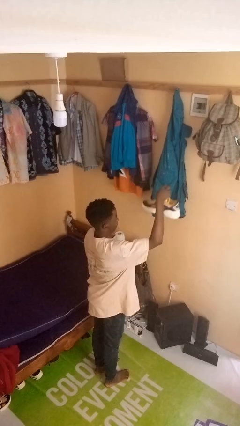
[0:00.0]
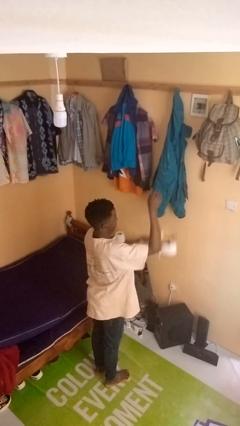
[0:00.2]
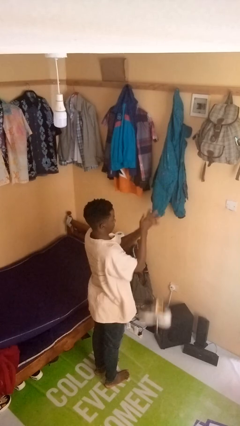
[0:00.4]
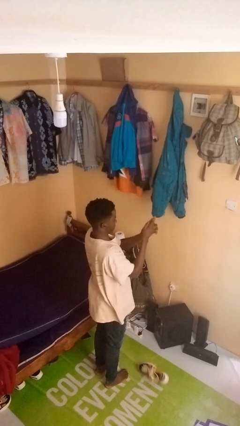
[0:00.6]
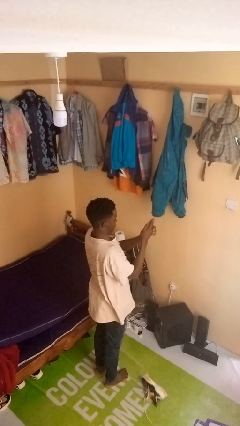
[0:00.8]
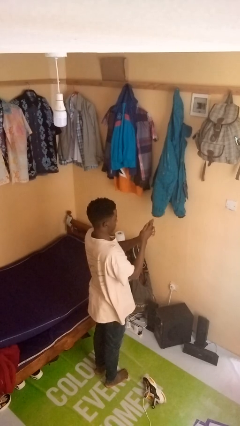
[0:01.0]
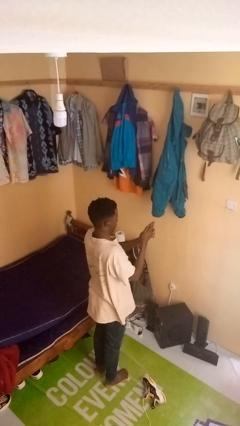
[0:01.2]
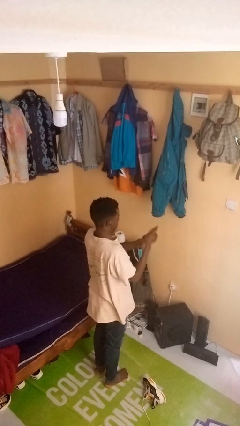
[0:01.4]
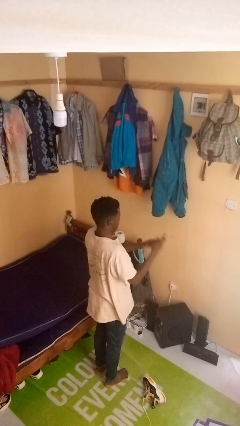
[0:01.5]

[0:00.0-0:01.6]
person drops object

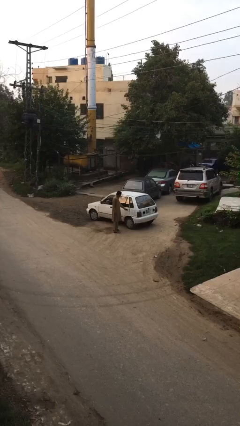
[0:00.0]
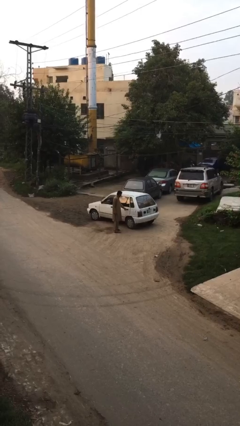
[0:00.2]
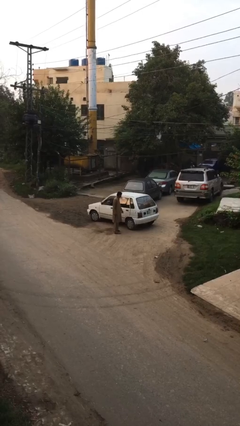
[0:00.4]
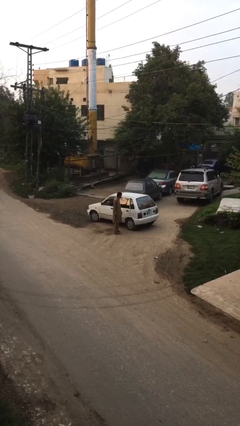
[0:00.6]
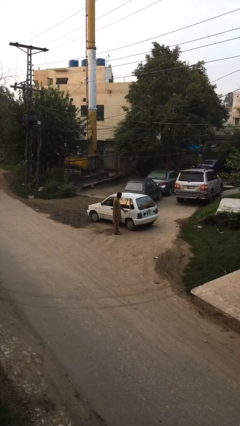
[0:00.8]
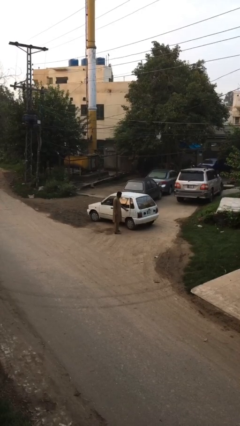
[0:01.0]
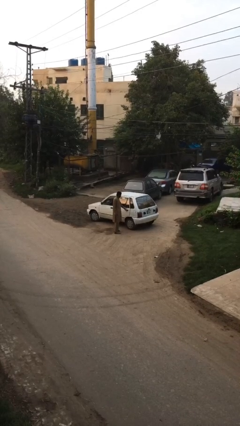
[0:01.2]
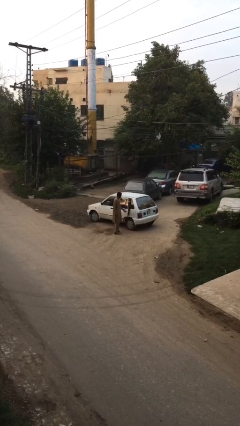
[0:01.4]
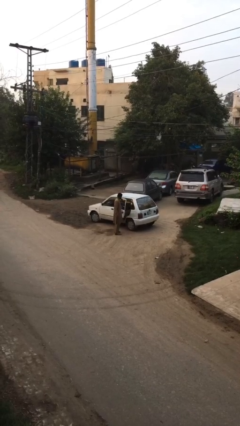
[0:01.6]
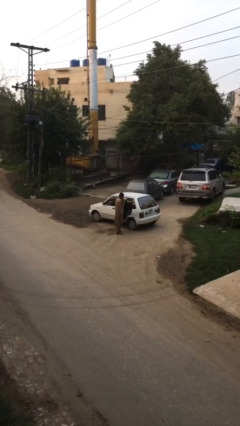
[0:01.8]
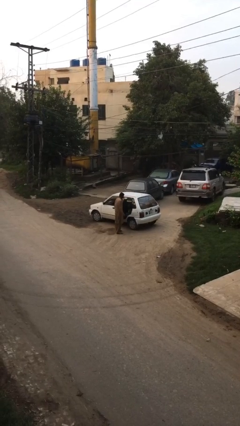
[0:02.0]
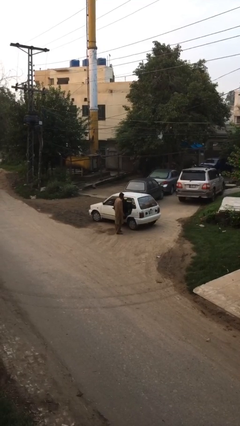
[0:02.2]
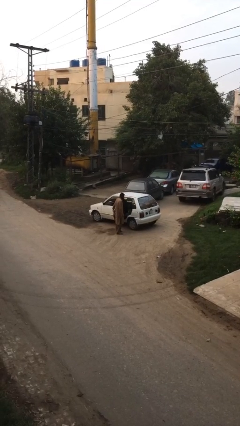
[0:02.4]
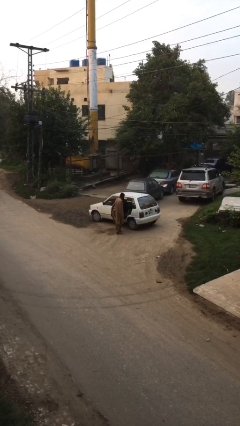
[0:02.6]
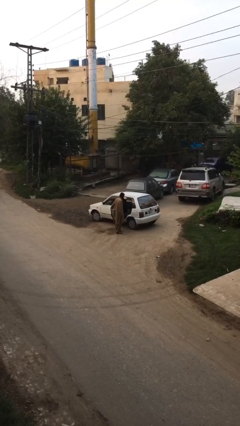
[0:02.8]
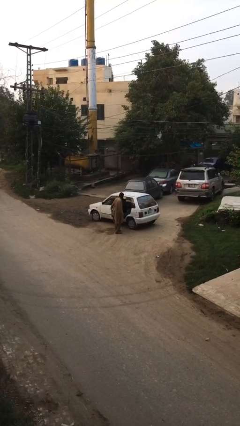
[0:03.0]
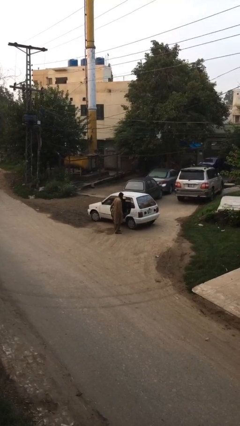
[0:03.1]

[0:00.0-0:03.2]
person opens car door

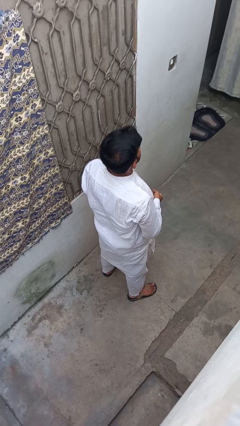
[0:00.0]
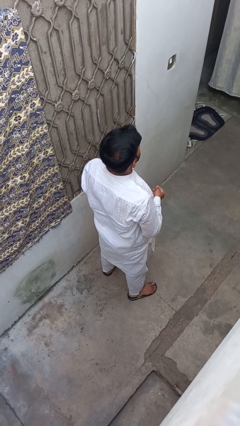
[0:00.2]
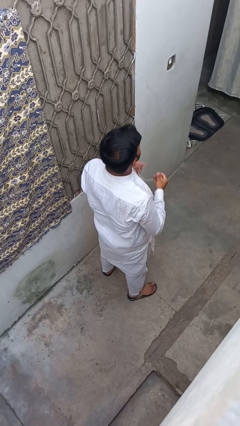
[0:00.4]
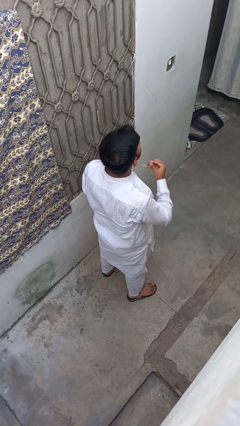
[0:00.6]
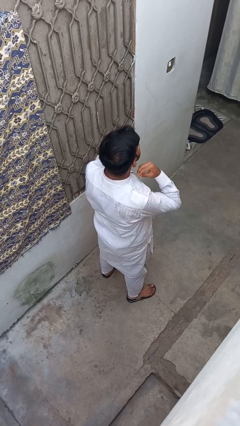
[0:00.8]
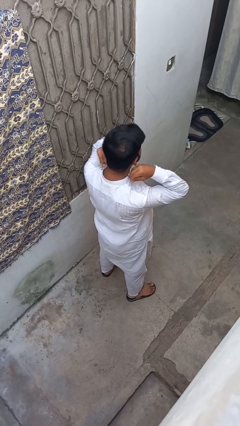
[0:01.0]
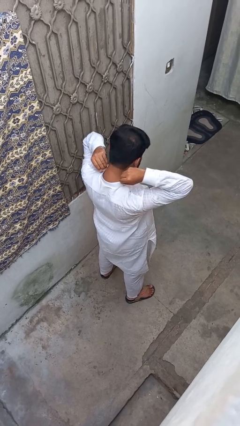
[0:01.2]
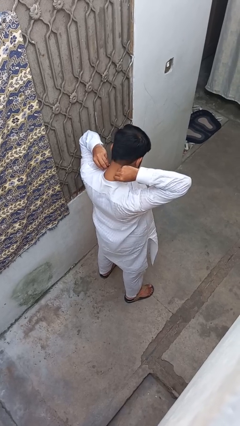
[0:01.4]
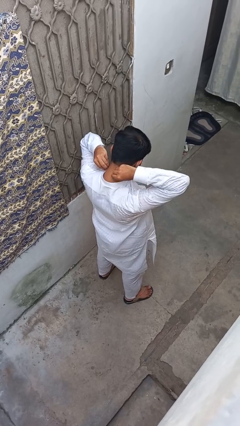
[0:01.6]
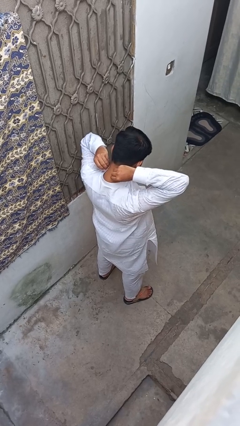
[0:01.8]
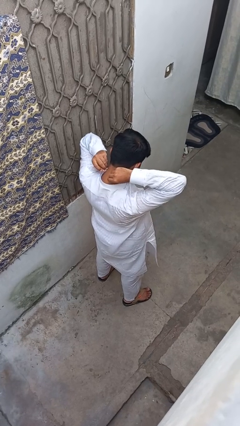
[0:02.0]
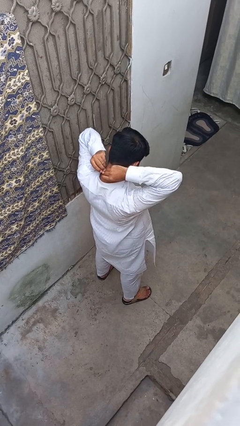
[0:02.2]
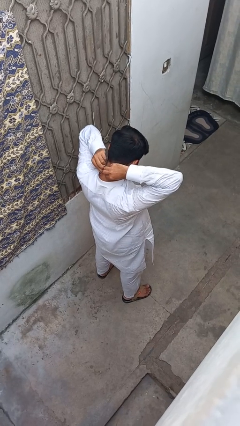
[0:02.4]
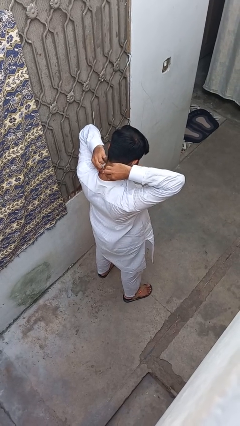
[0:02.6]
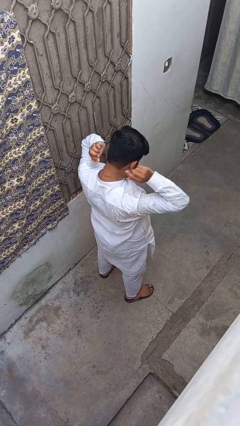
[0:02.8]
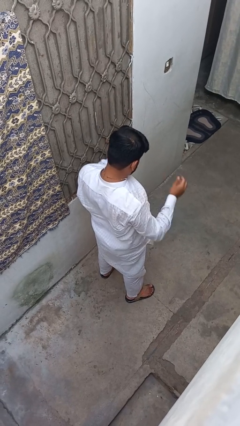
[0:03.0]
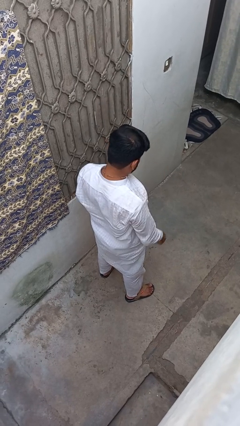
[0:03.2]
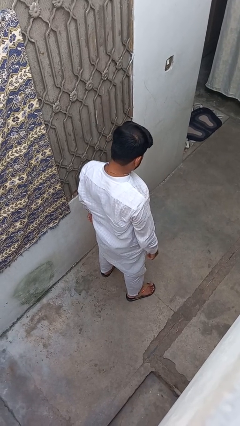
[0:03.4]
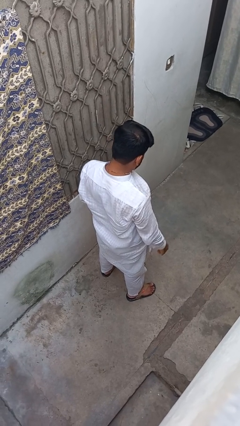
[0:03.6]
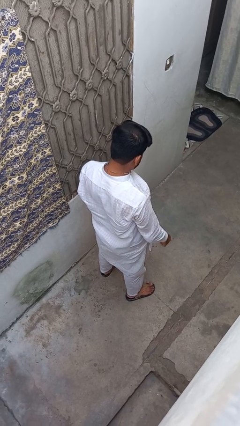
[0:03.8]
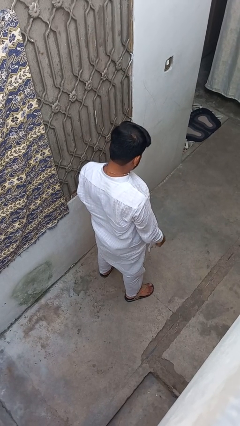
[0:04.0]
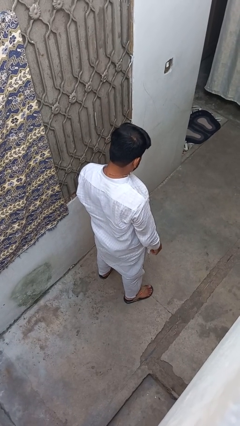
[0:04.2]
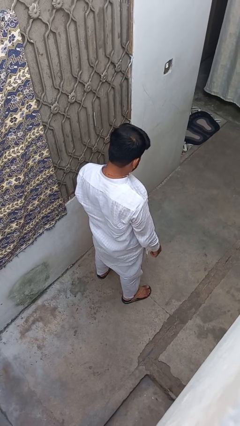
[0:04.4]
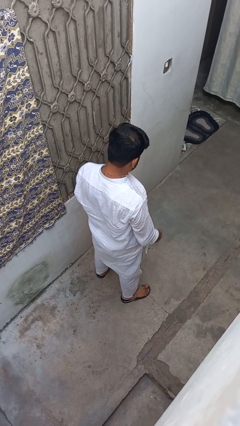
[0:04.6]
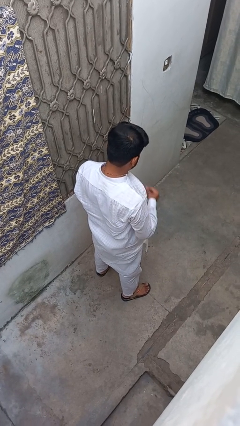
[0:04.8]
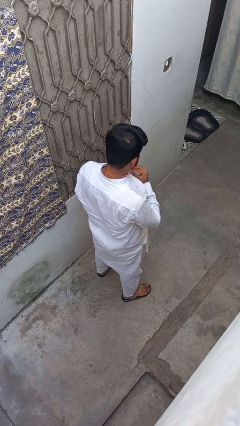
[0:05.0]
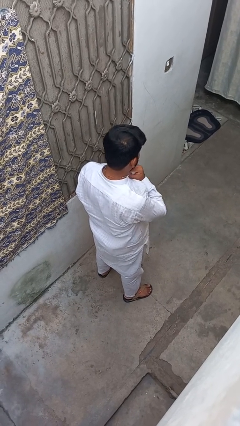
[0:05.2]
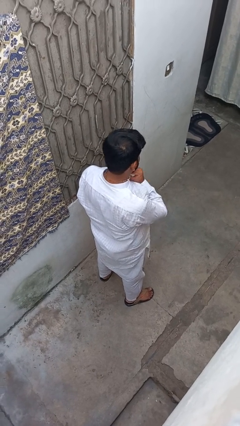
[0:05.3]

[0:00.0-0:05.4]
person puts on necklace

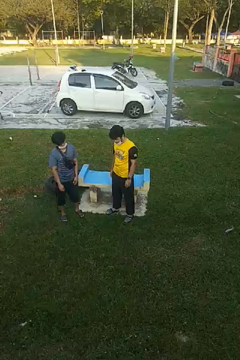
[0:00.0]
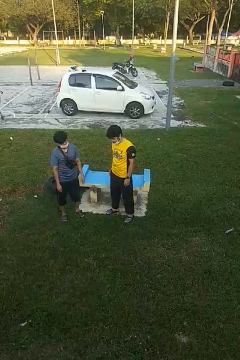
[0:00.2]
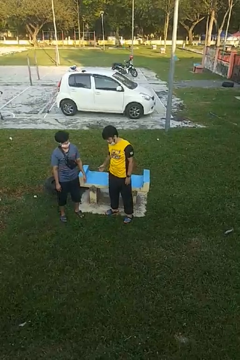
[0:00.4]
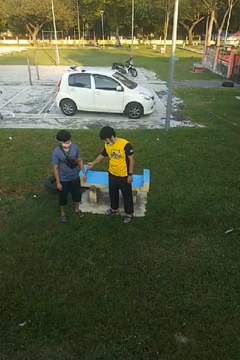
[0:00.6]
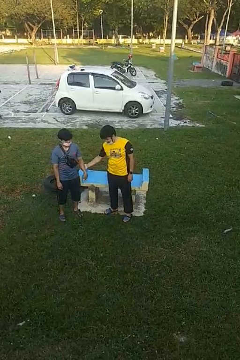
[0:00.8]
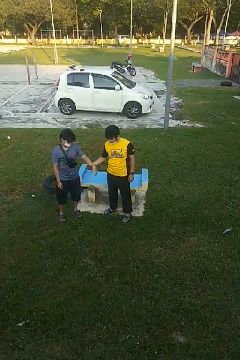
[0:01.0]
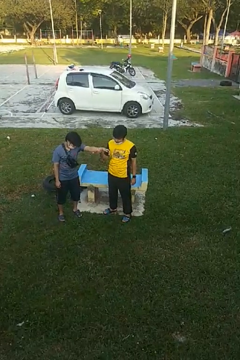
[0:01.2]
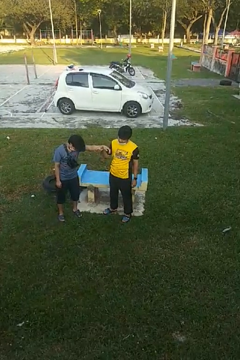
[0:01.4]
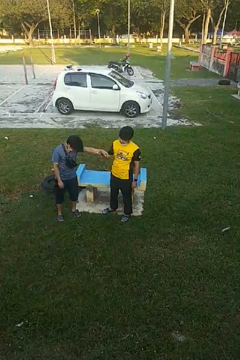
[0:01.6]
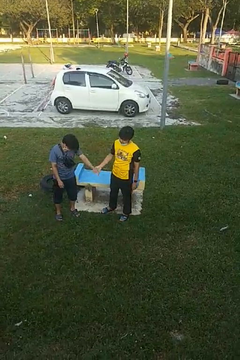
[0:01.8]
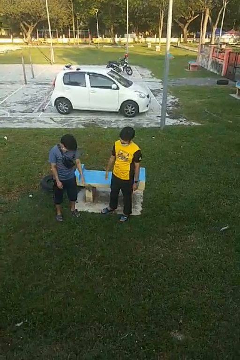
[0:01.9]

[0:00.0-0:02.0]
person grabs person by forearm

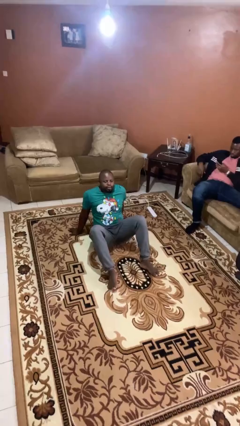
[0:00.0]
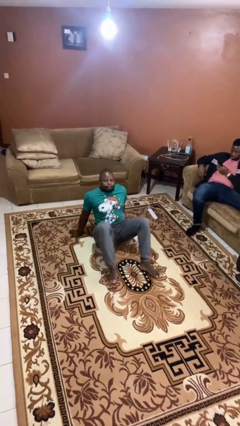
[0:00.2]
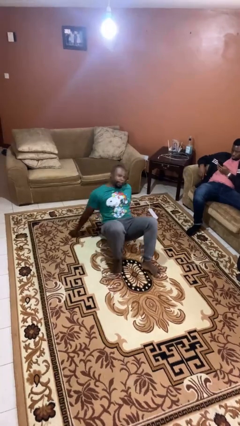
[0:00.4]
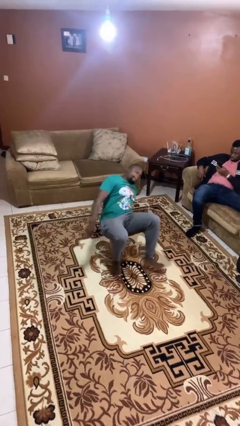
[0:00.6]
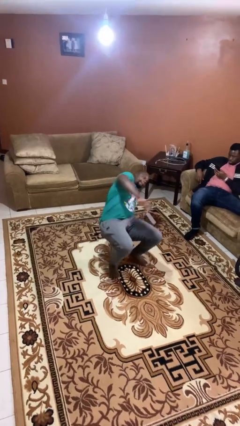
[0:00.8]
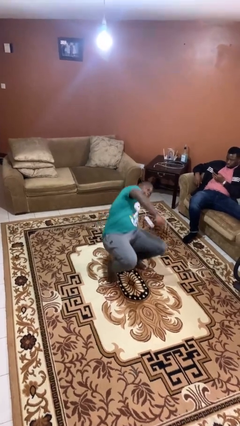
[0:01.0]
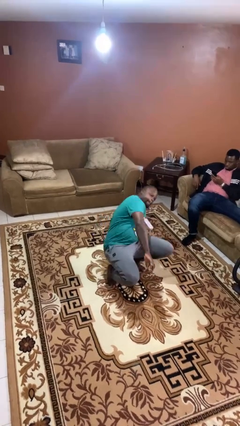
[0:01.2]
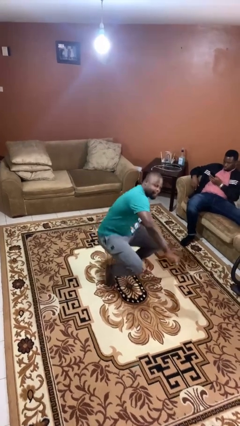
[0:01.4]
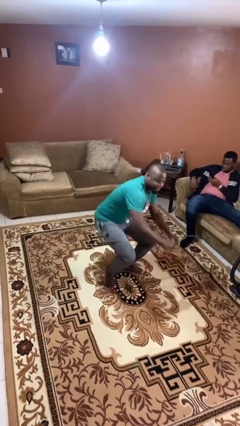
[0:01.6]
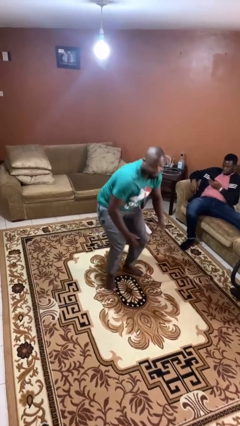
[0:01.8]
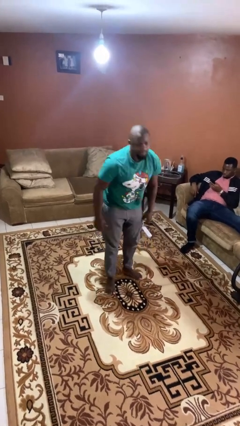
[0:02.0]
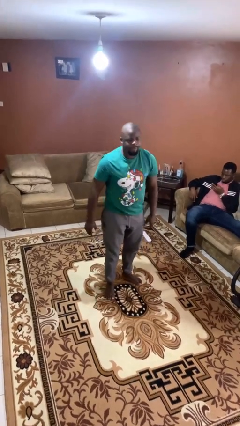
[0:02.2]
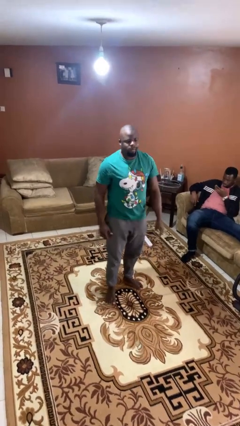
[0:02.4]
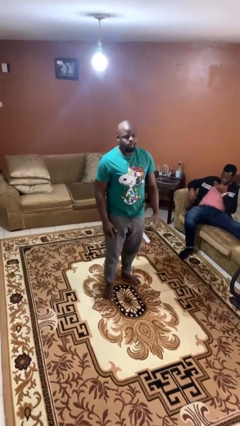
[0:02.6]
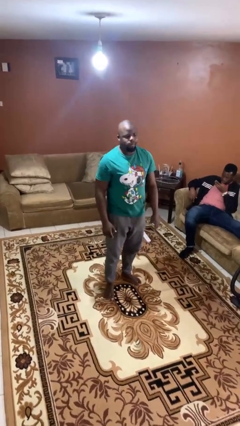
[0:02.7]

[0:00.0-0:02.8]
person stands up

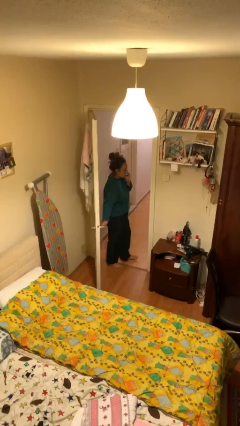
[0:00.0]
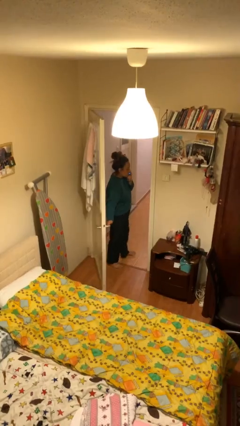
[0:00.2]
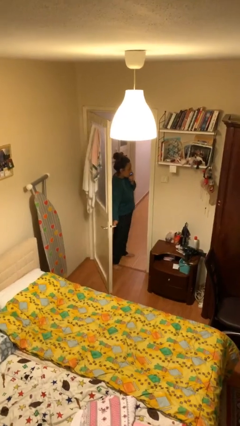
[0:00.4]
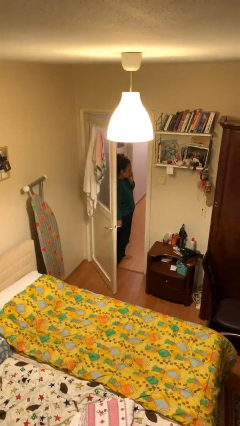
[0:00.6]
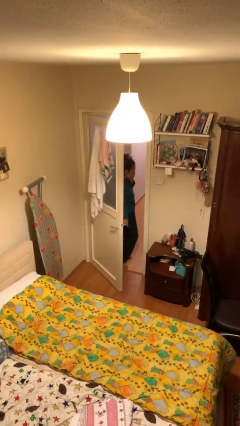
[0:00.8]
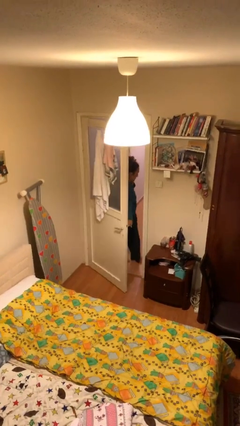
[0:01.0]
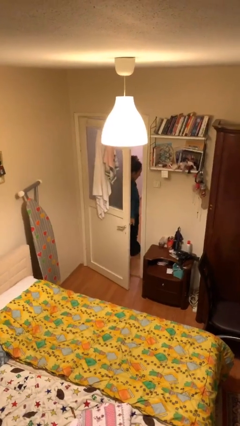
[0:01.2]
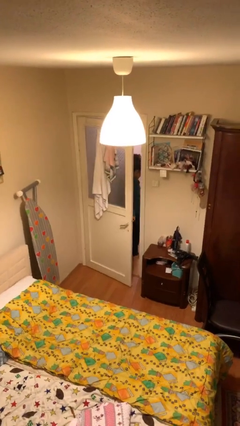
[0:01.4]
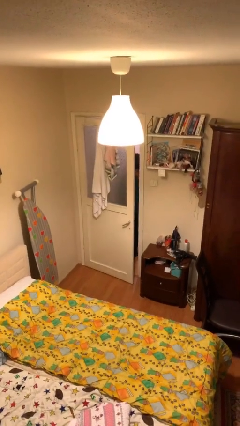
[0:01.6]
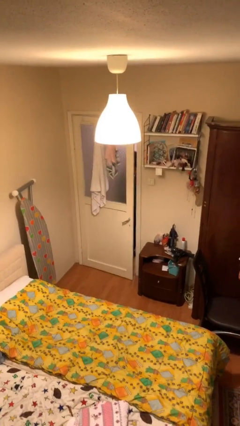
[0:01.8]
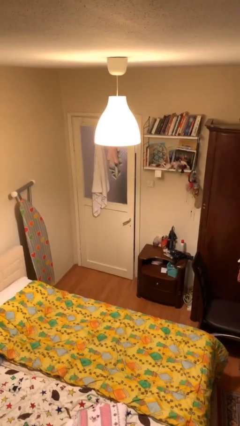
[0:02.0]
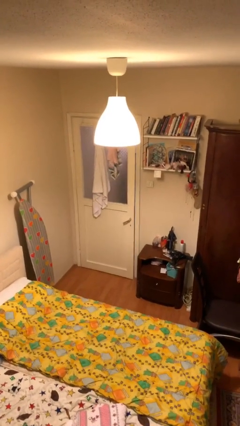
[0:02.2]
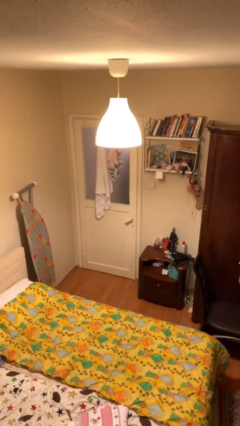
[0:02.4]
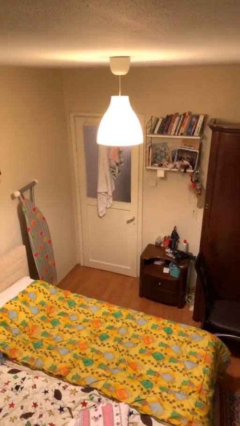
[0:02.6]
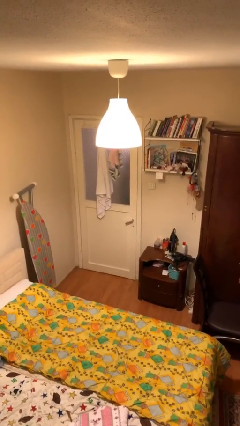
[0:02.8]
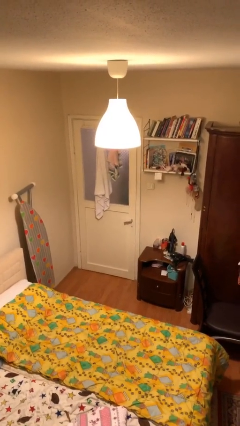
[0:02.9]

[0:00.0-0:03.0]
person closes facility door
